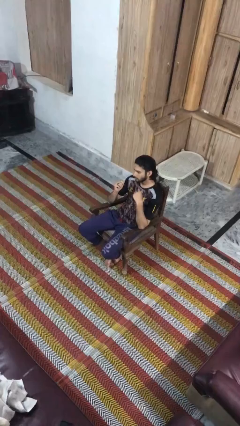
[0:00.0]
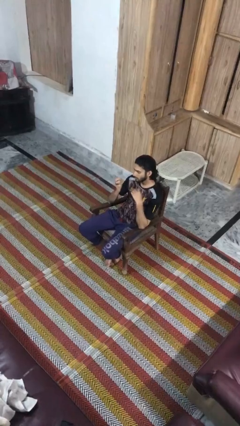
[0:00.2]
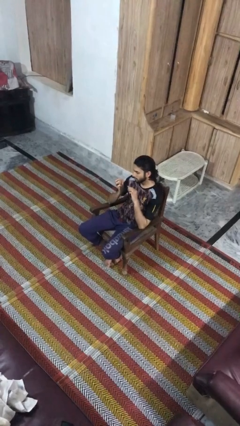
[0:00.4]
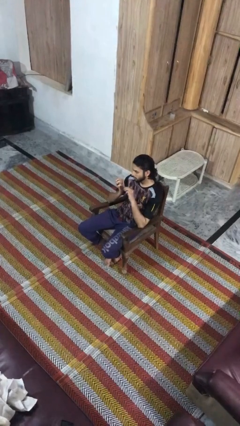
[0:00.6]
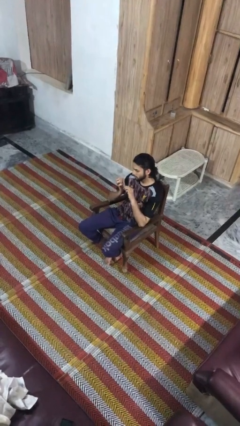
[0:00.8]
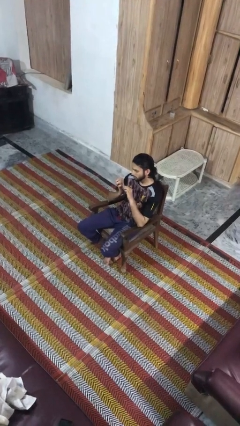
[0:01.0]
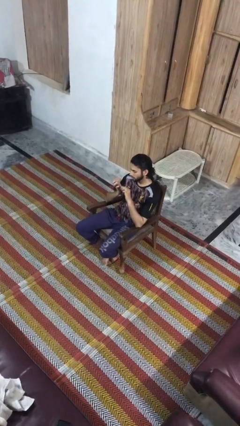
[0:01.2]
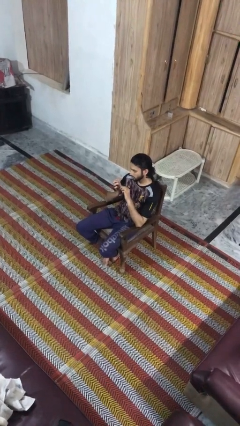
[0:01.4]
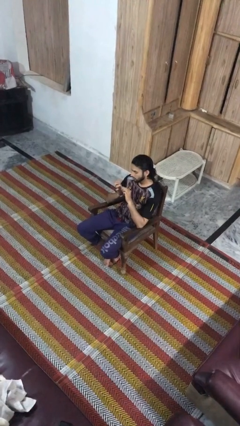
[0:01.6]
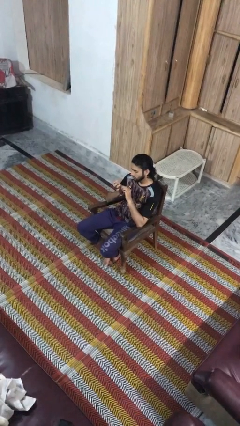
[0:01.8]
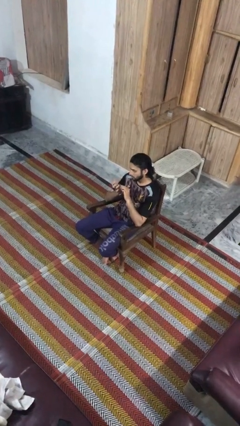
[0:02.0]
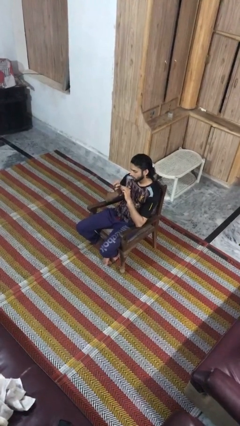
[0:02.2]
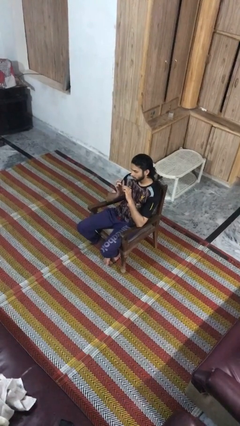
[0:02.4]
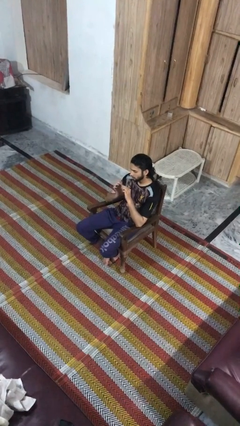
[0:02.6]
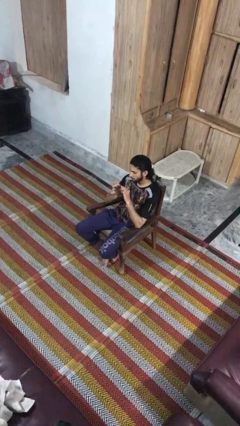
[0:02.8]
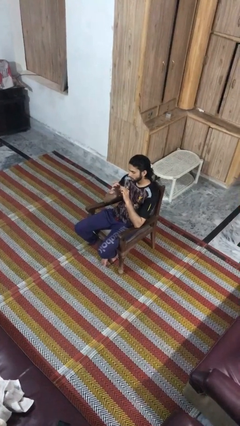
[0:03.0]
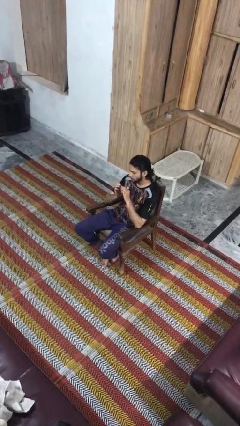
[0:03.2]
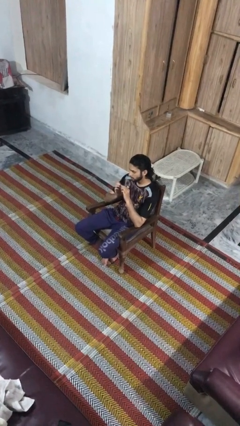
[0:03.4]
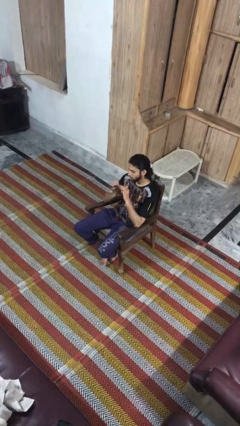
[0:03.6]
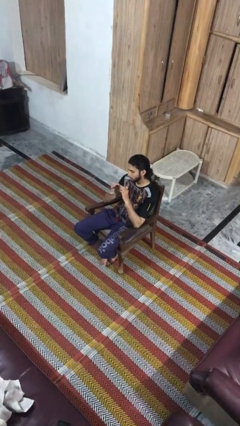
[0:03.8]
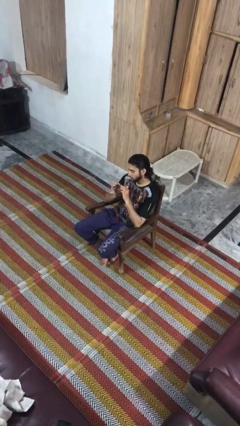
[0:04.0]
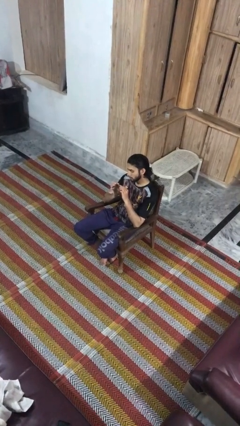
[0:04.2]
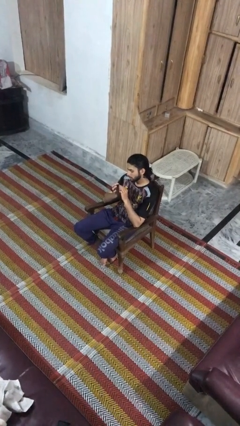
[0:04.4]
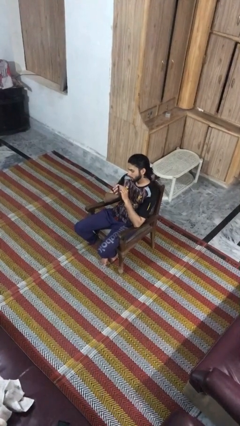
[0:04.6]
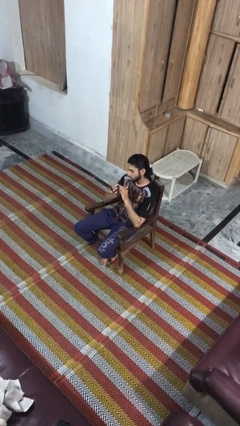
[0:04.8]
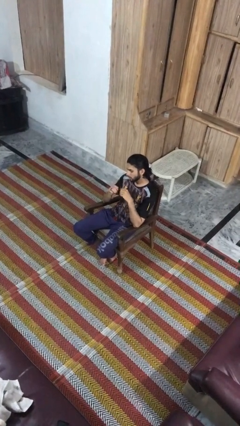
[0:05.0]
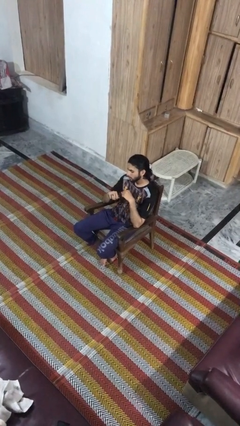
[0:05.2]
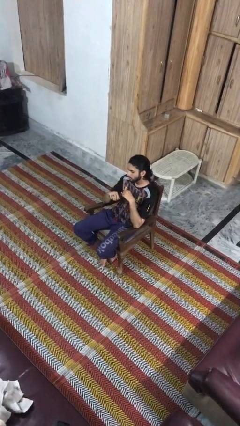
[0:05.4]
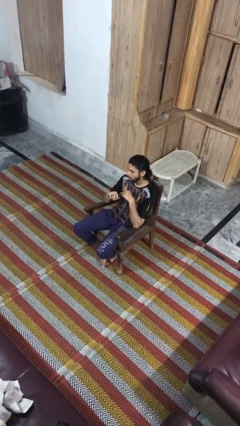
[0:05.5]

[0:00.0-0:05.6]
person files fingernails

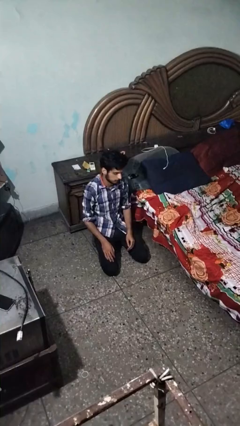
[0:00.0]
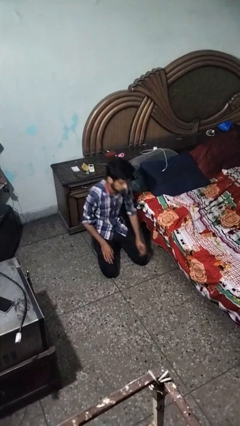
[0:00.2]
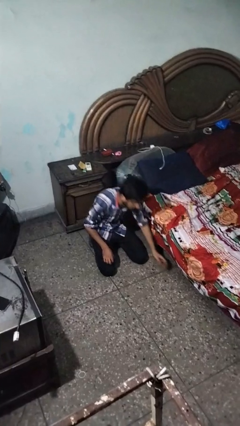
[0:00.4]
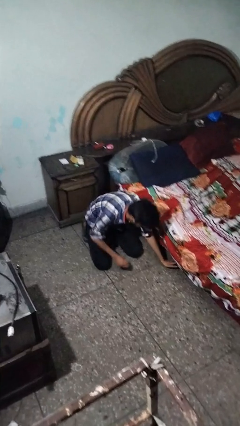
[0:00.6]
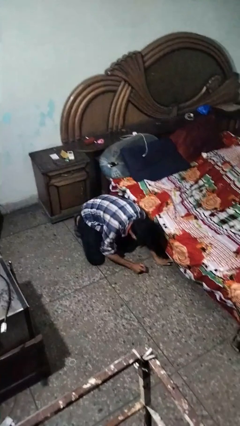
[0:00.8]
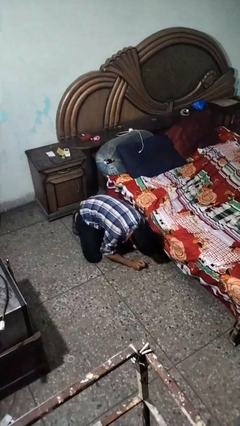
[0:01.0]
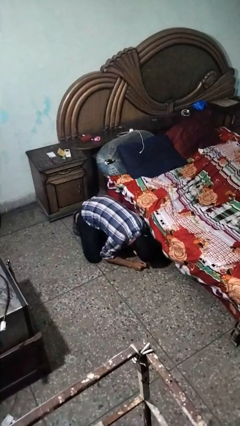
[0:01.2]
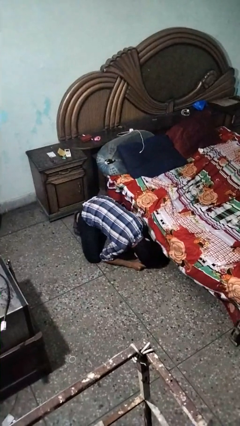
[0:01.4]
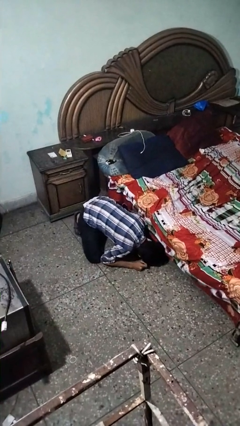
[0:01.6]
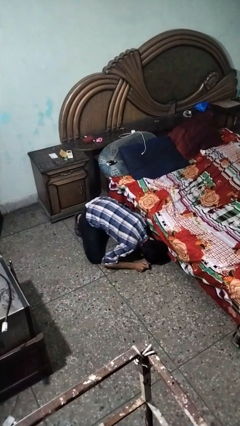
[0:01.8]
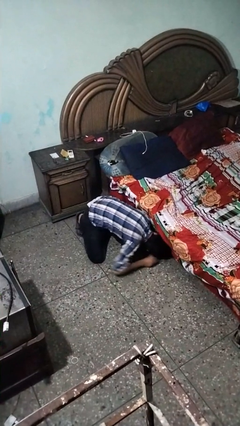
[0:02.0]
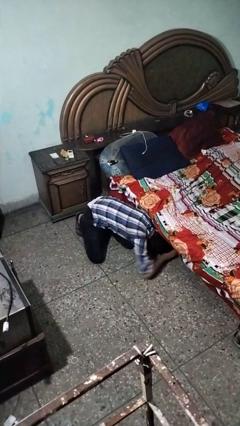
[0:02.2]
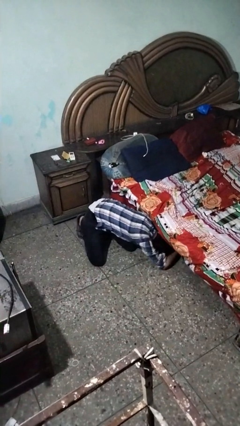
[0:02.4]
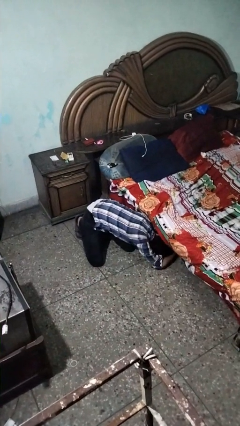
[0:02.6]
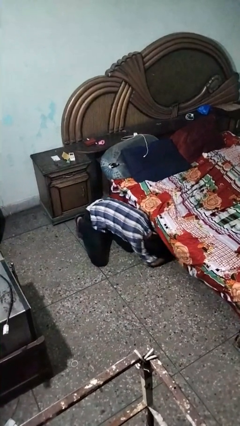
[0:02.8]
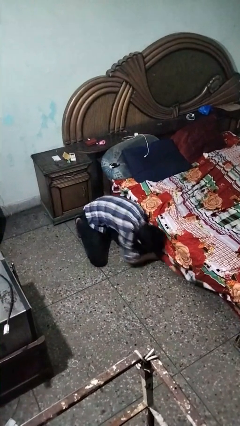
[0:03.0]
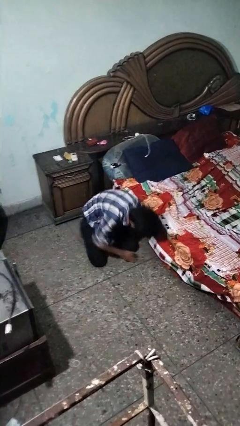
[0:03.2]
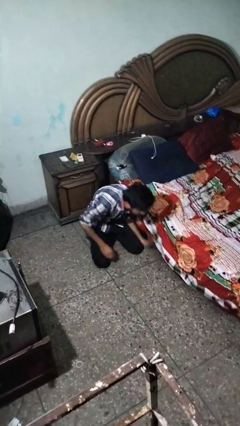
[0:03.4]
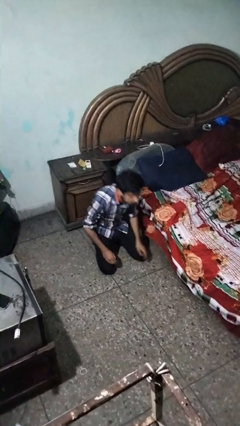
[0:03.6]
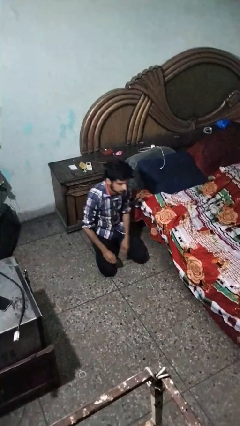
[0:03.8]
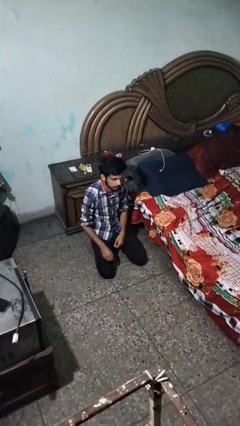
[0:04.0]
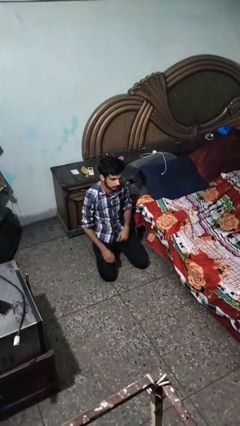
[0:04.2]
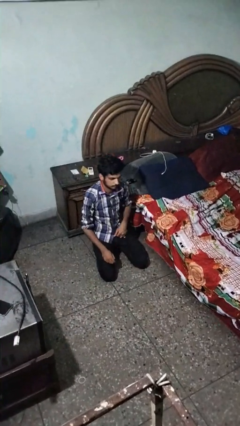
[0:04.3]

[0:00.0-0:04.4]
person searches under bed

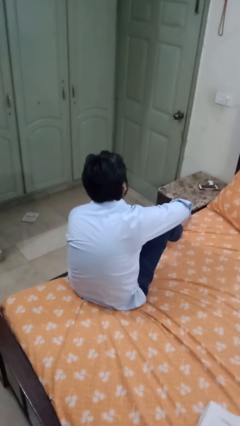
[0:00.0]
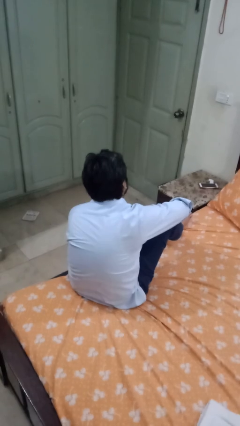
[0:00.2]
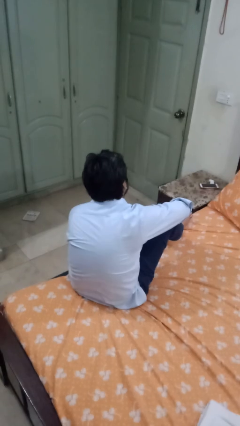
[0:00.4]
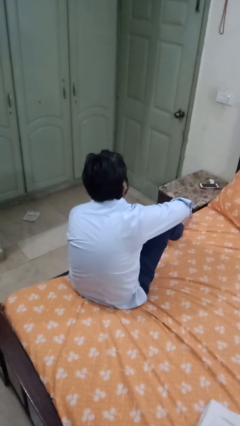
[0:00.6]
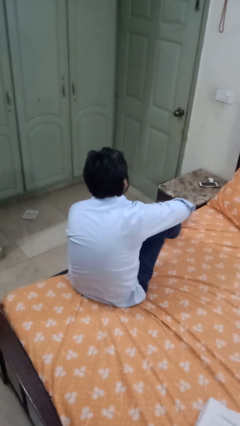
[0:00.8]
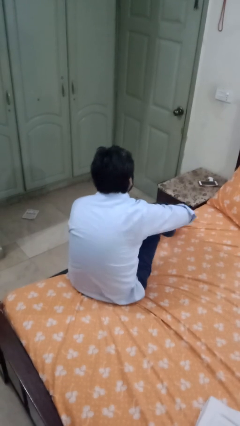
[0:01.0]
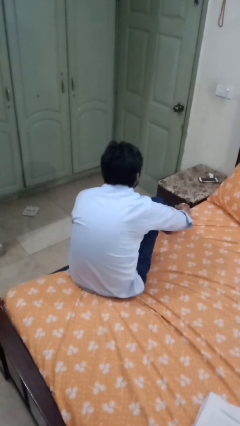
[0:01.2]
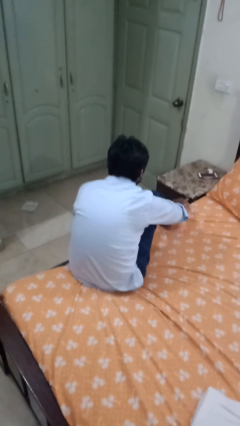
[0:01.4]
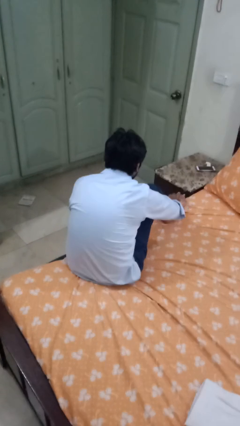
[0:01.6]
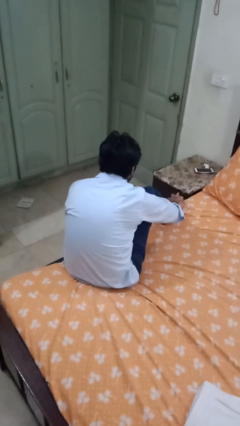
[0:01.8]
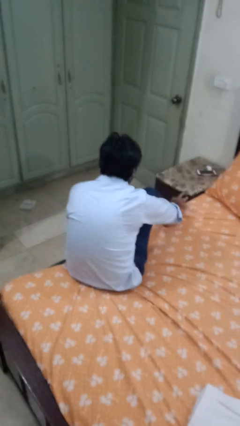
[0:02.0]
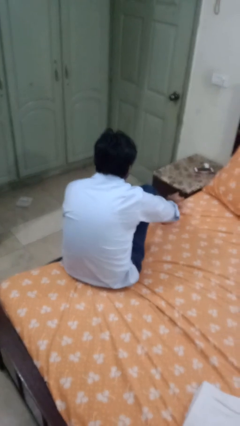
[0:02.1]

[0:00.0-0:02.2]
person rubs foot

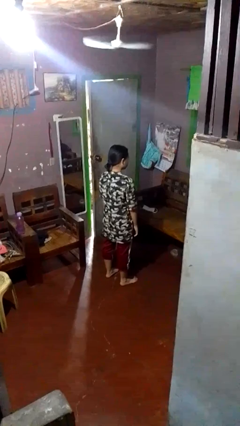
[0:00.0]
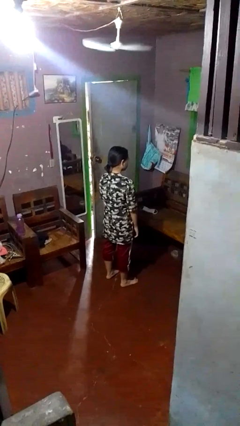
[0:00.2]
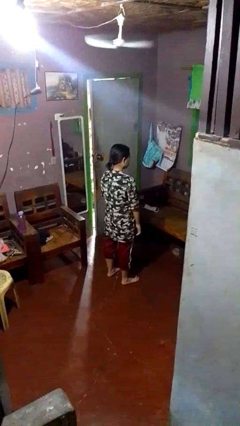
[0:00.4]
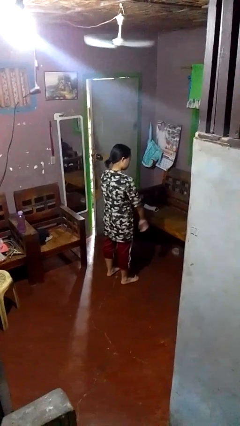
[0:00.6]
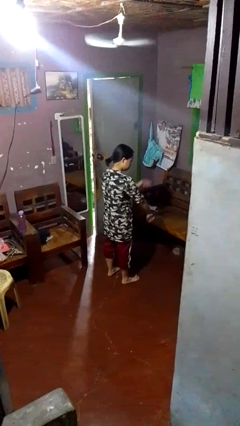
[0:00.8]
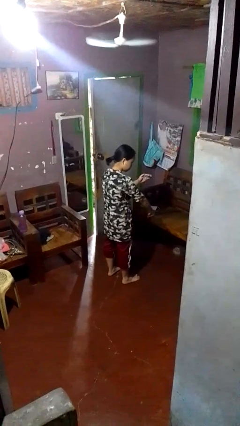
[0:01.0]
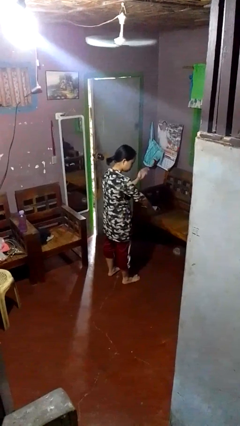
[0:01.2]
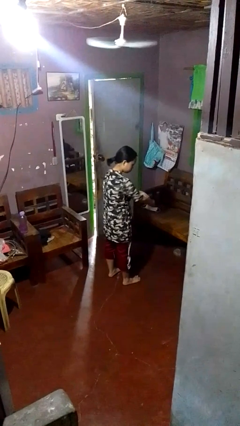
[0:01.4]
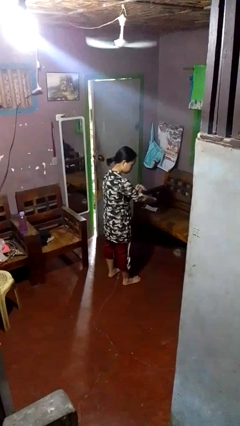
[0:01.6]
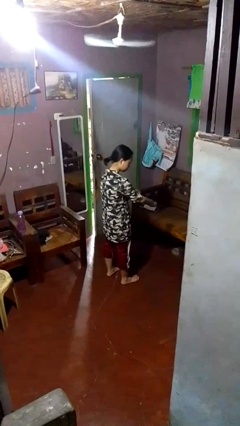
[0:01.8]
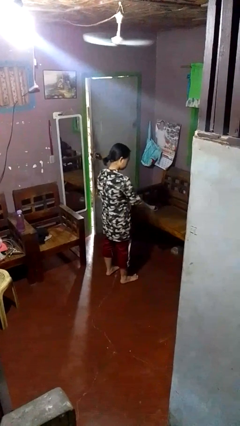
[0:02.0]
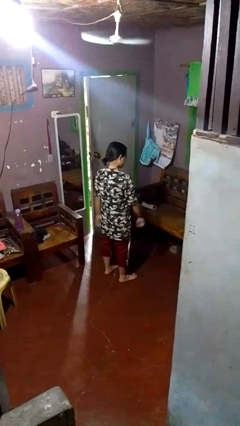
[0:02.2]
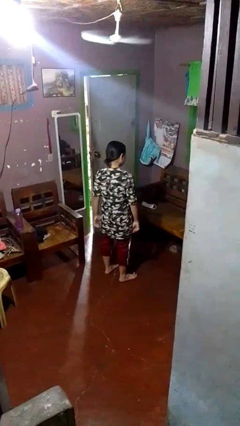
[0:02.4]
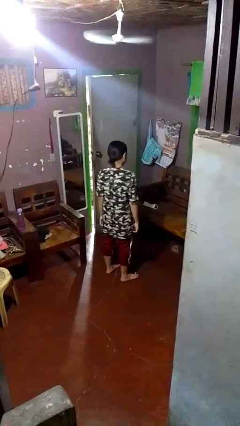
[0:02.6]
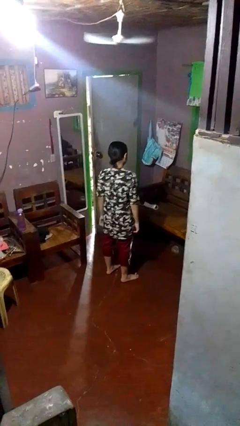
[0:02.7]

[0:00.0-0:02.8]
person swats bug

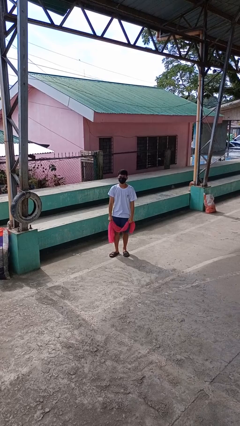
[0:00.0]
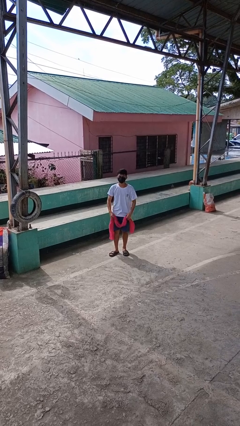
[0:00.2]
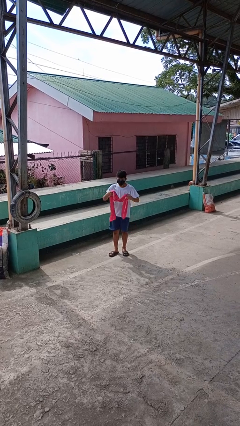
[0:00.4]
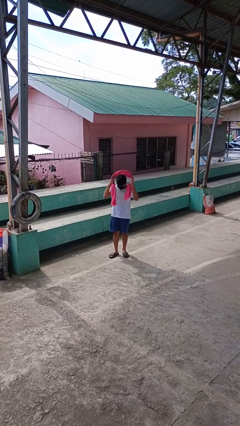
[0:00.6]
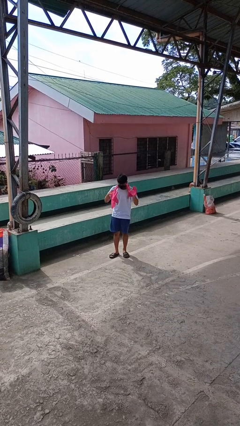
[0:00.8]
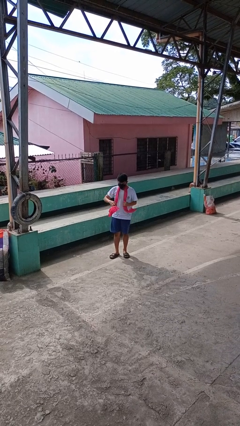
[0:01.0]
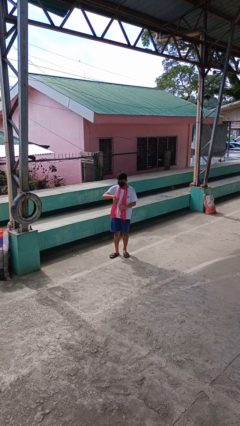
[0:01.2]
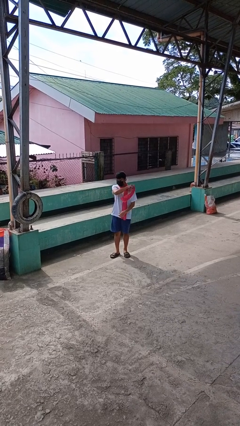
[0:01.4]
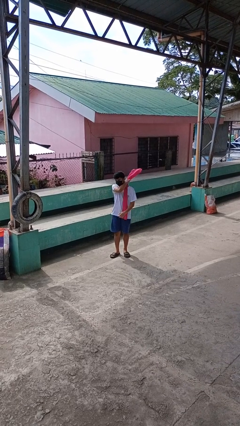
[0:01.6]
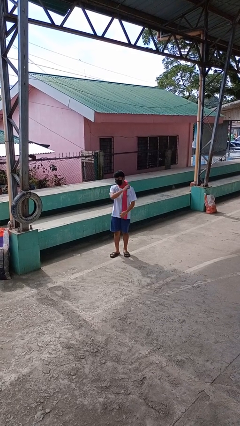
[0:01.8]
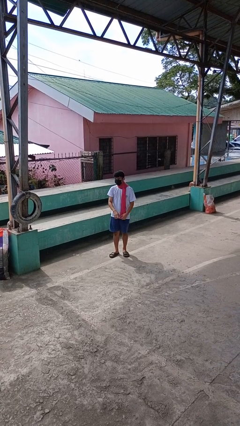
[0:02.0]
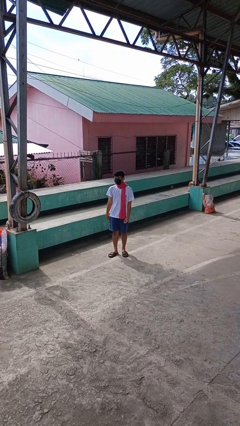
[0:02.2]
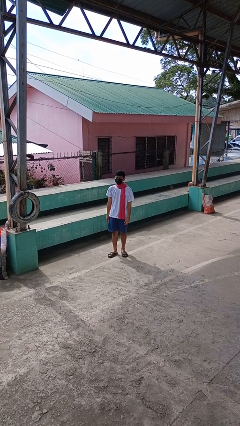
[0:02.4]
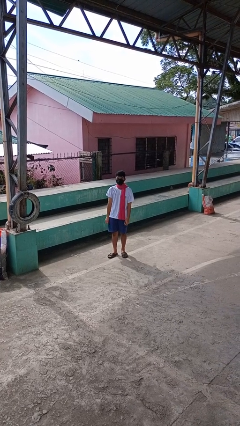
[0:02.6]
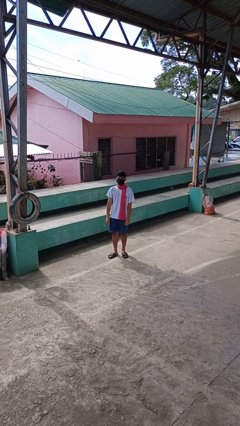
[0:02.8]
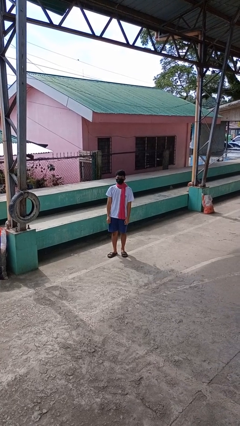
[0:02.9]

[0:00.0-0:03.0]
person puts on scarf
